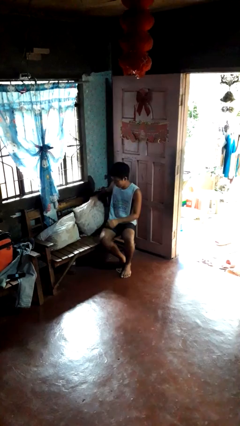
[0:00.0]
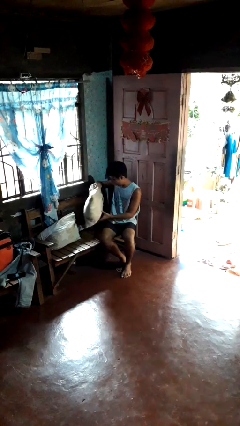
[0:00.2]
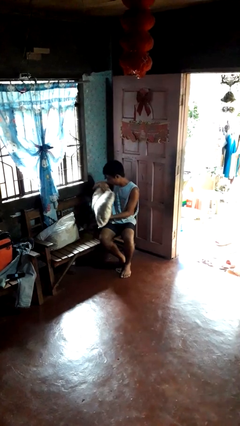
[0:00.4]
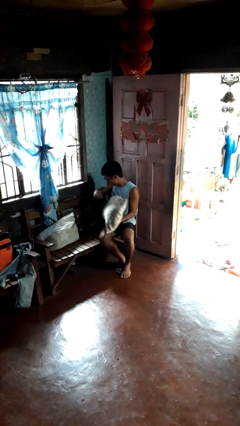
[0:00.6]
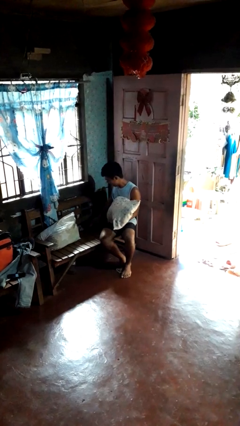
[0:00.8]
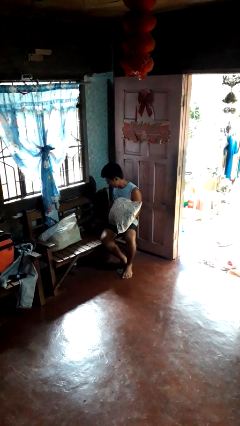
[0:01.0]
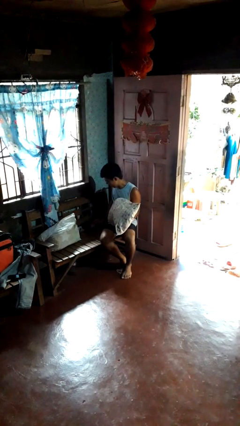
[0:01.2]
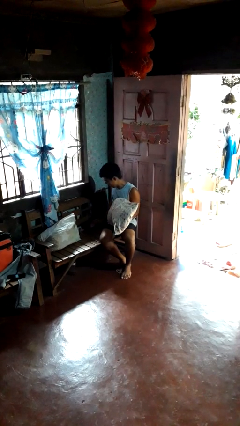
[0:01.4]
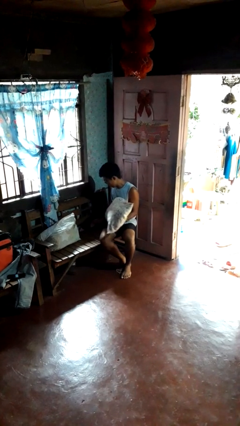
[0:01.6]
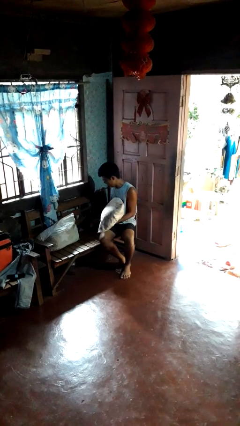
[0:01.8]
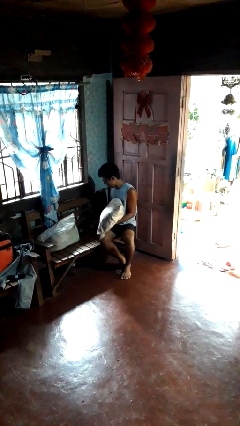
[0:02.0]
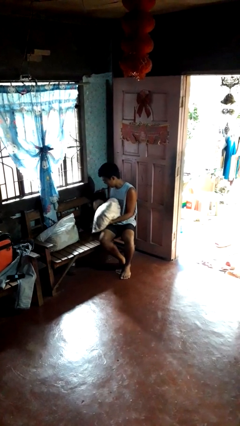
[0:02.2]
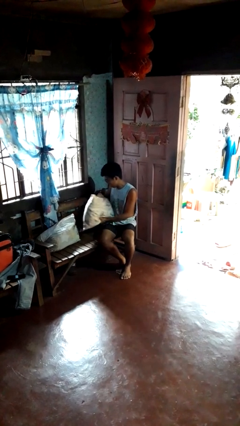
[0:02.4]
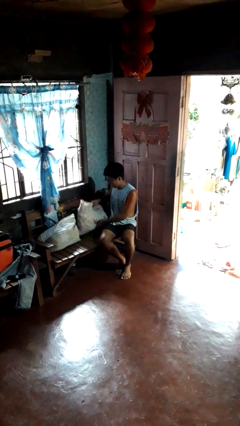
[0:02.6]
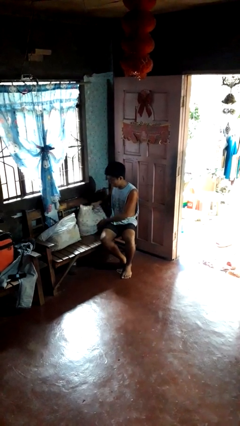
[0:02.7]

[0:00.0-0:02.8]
person searches in couch

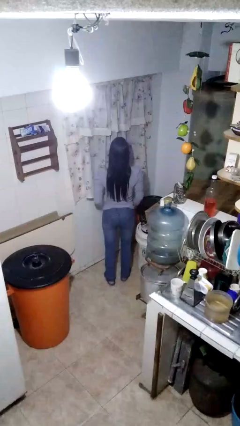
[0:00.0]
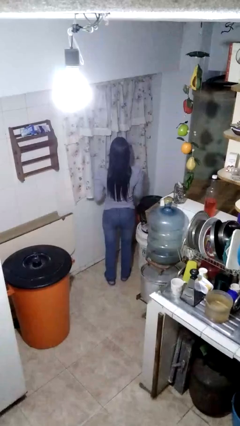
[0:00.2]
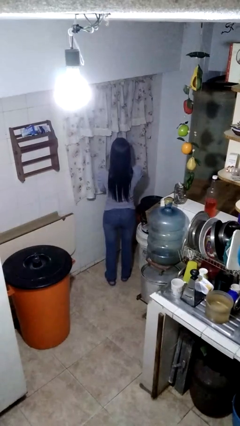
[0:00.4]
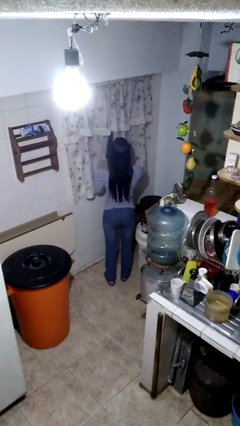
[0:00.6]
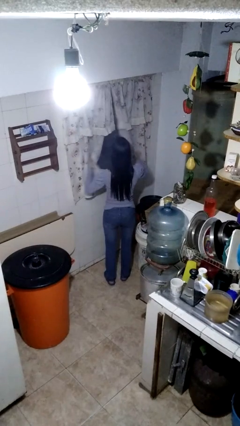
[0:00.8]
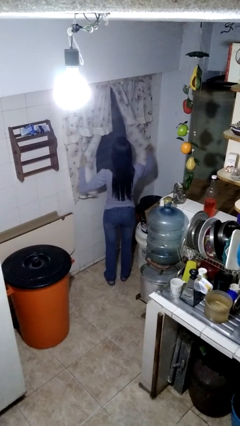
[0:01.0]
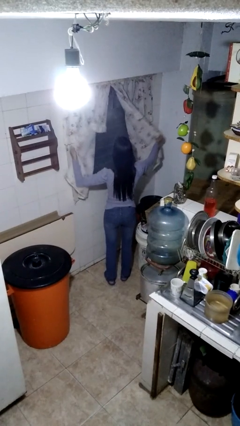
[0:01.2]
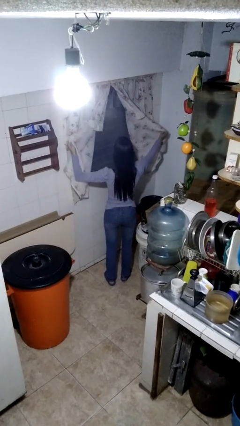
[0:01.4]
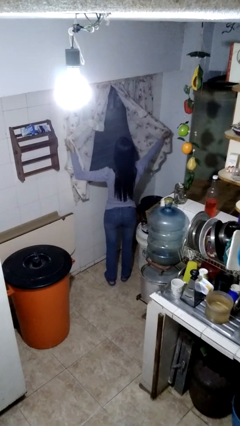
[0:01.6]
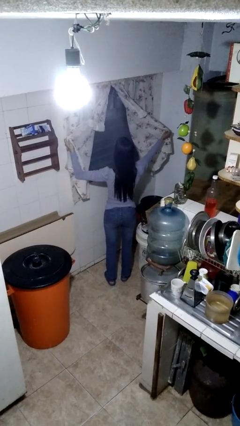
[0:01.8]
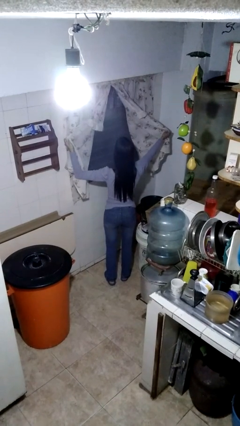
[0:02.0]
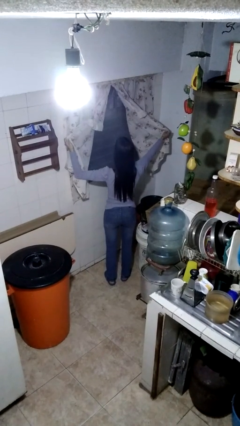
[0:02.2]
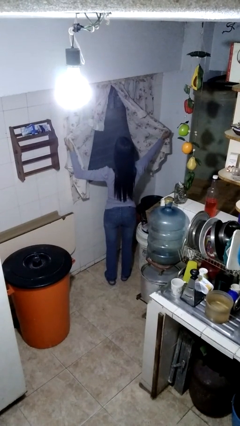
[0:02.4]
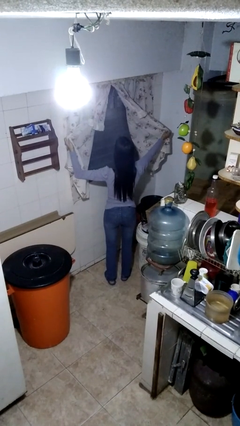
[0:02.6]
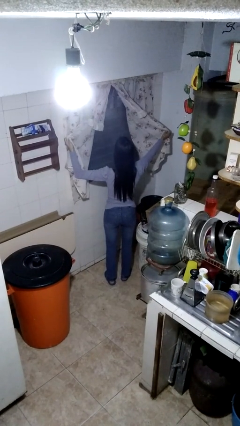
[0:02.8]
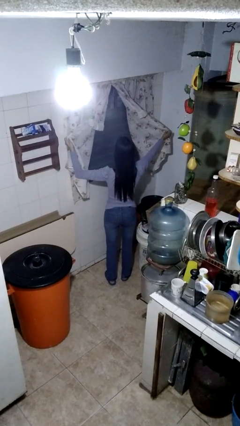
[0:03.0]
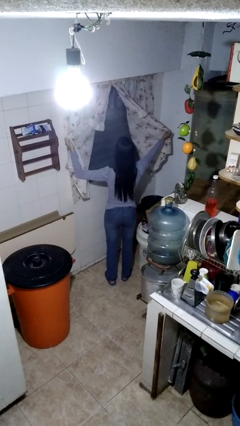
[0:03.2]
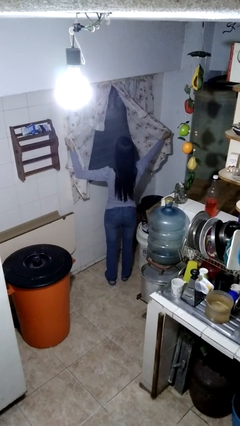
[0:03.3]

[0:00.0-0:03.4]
person opens curtains

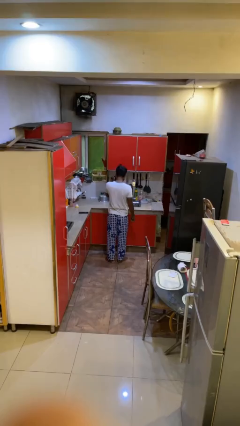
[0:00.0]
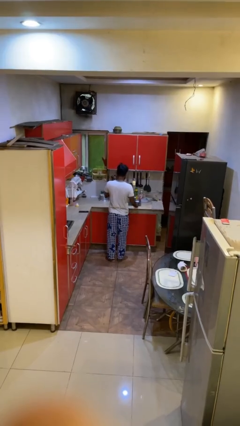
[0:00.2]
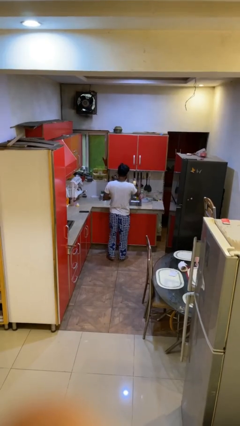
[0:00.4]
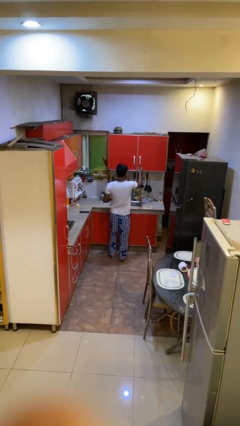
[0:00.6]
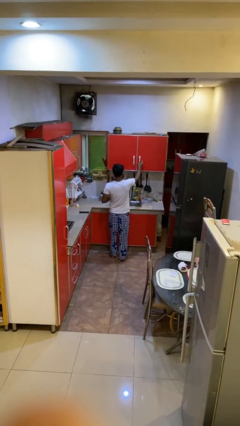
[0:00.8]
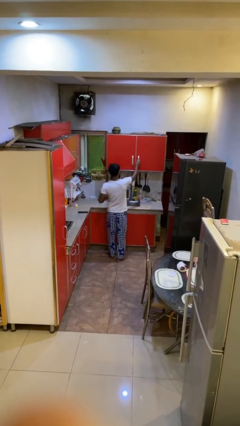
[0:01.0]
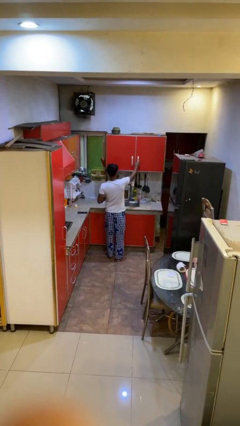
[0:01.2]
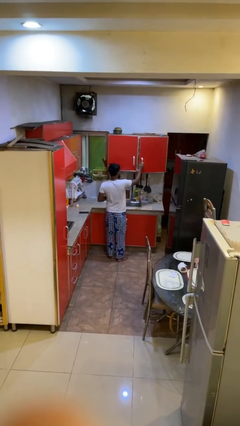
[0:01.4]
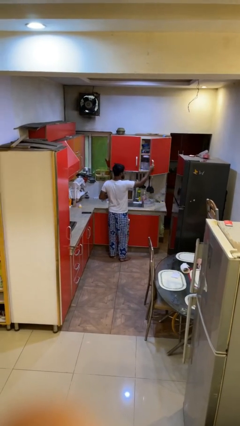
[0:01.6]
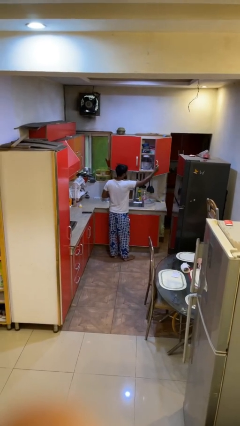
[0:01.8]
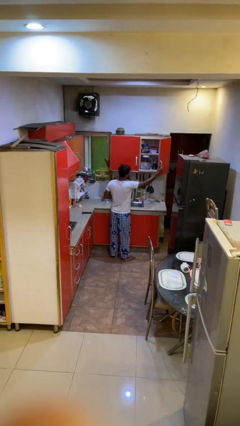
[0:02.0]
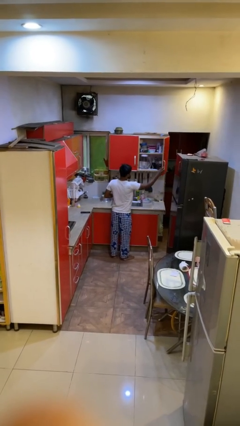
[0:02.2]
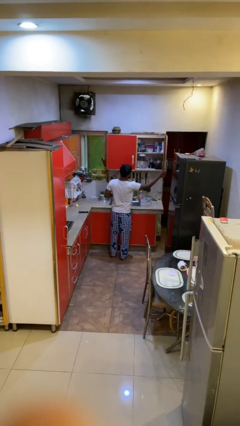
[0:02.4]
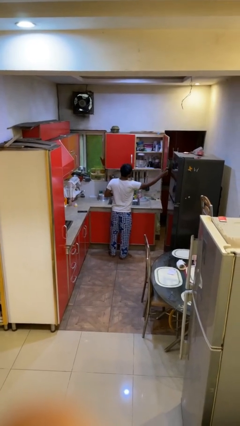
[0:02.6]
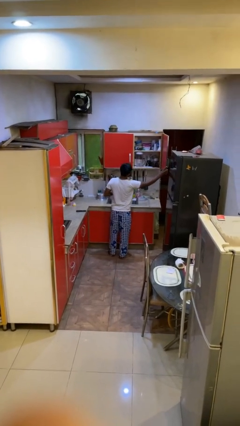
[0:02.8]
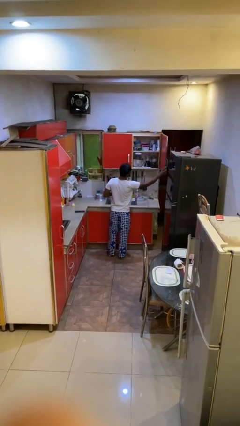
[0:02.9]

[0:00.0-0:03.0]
person opens cabinet

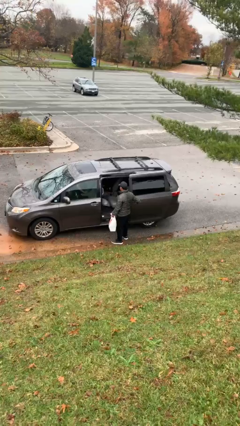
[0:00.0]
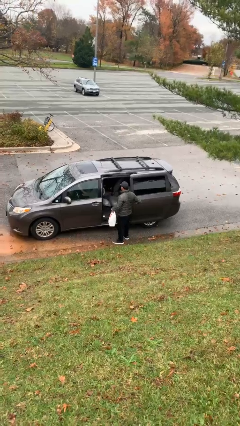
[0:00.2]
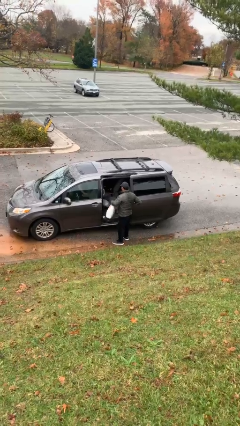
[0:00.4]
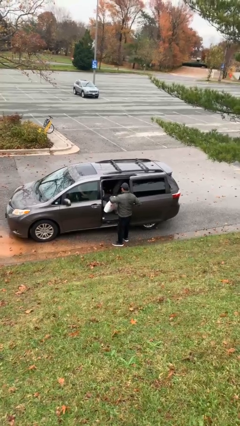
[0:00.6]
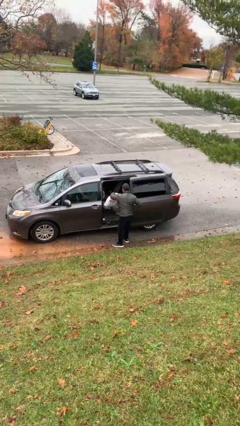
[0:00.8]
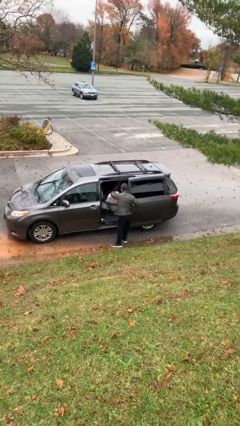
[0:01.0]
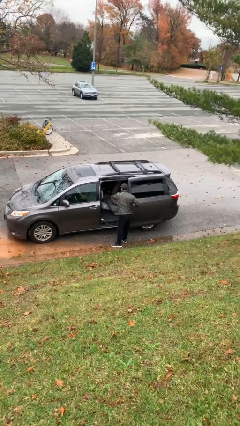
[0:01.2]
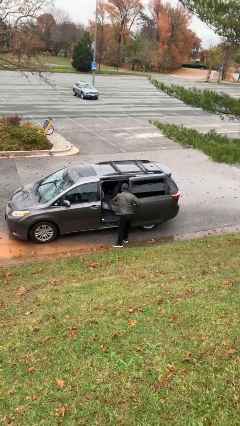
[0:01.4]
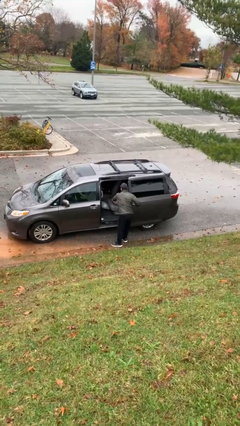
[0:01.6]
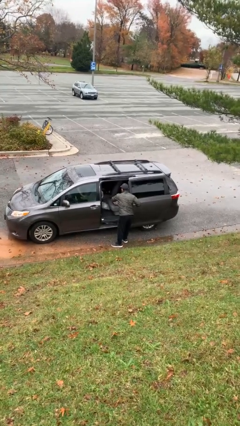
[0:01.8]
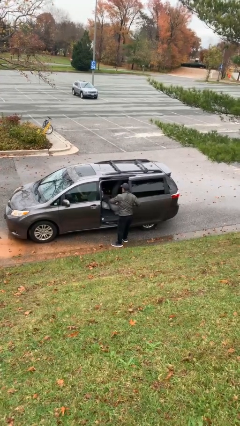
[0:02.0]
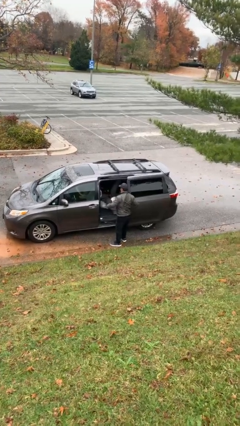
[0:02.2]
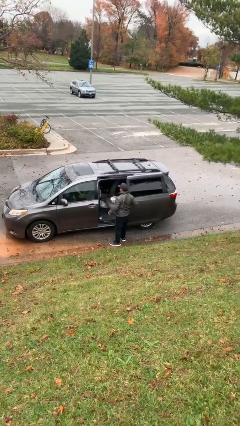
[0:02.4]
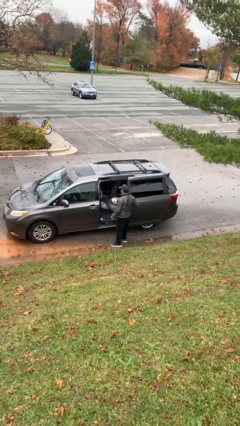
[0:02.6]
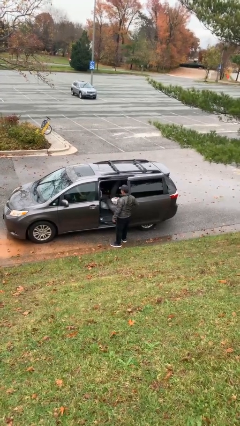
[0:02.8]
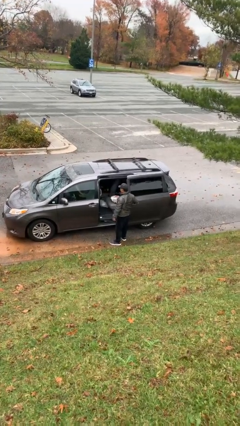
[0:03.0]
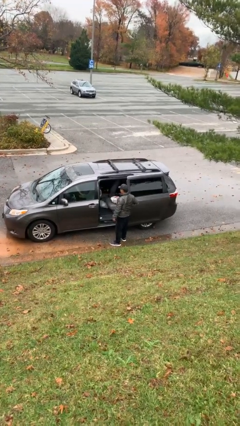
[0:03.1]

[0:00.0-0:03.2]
person loads car

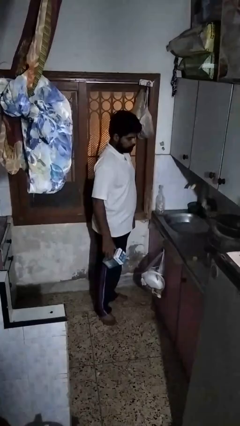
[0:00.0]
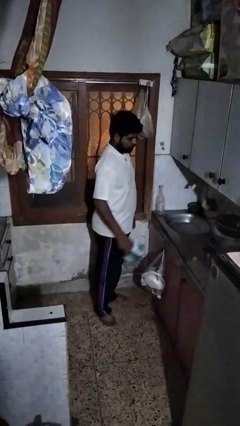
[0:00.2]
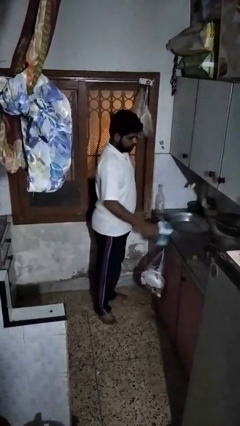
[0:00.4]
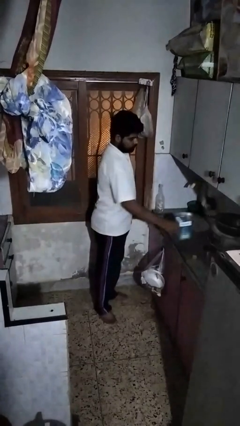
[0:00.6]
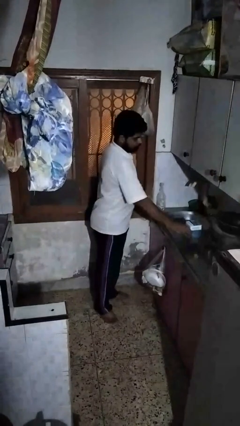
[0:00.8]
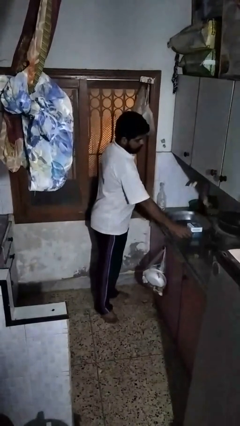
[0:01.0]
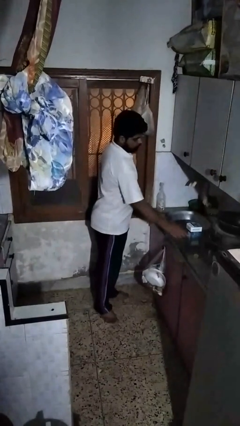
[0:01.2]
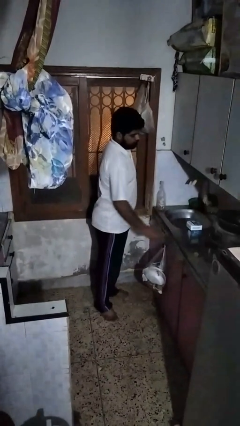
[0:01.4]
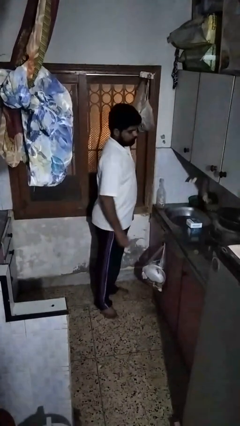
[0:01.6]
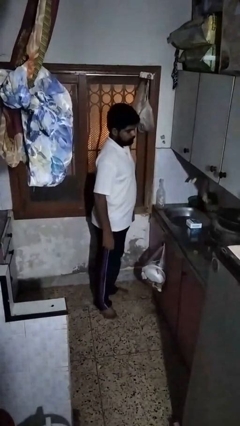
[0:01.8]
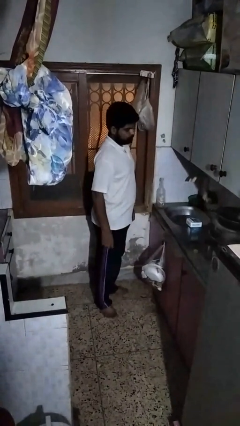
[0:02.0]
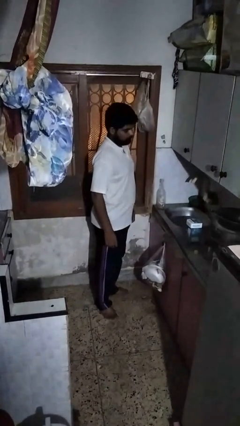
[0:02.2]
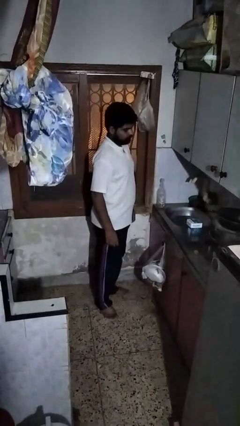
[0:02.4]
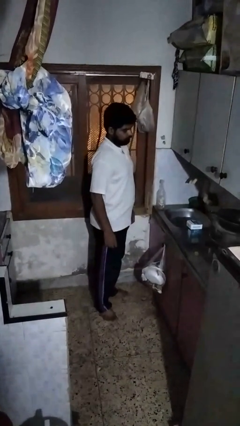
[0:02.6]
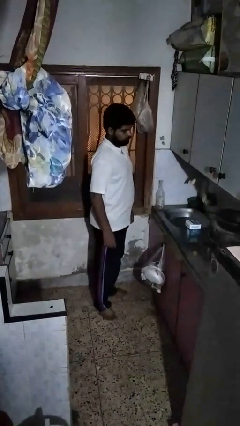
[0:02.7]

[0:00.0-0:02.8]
person puts down object on countertop

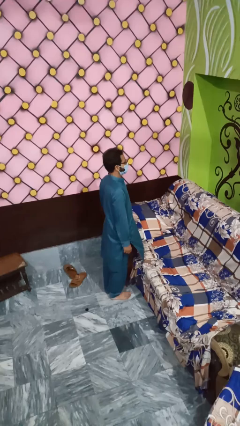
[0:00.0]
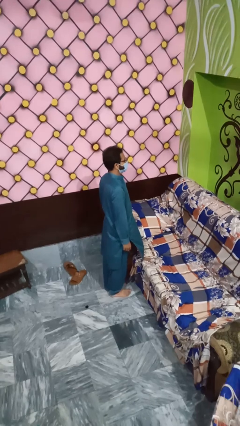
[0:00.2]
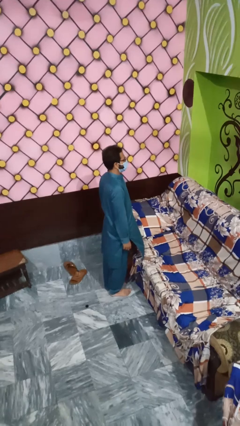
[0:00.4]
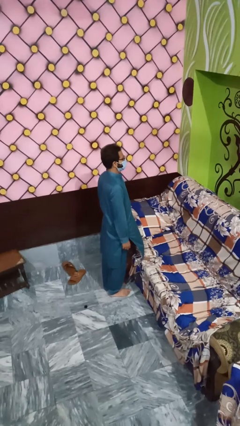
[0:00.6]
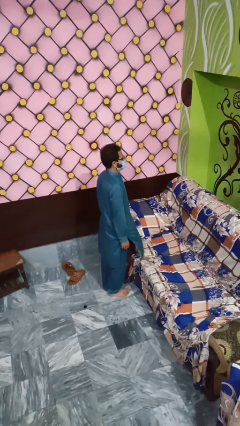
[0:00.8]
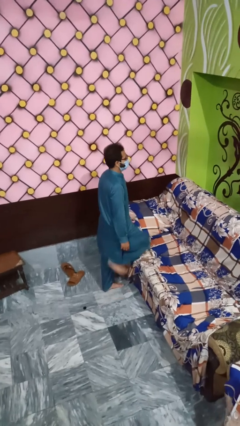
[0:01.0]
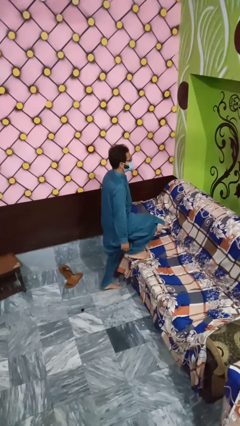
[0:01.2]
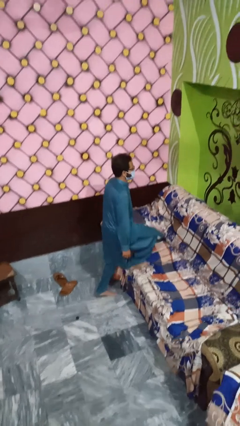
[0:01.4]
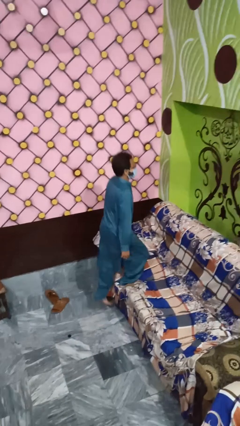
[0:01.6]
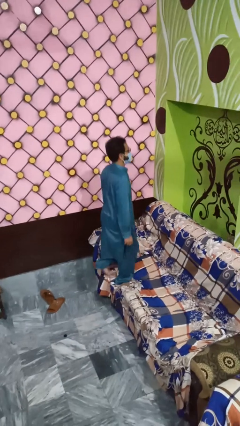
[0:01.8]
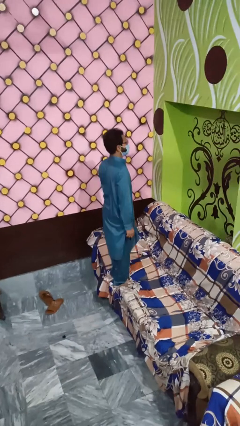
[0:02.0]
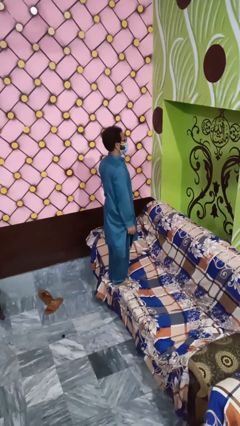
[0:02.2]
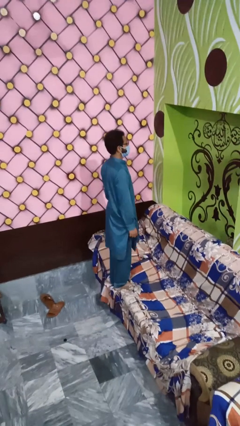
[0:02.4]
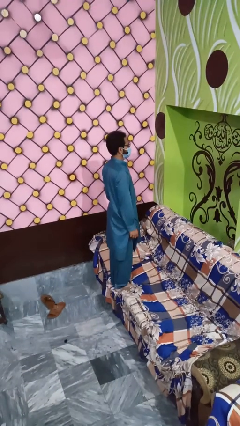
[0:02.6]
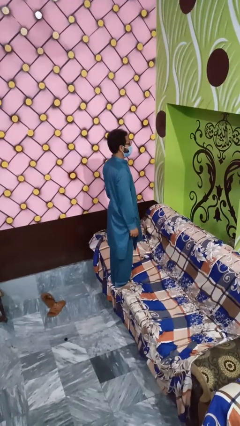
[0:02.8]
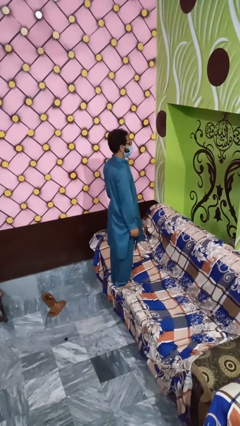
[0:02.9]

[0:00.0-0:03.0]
person climbs on couch
